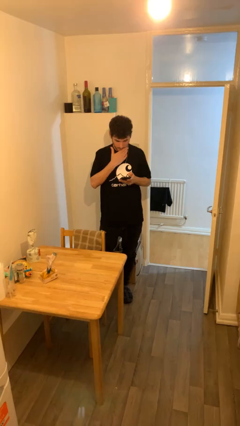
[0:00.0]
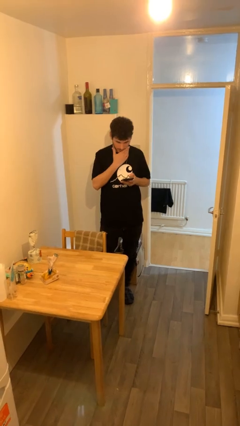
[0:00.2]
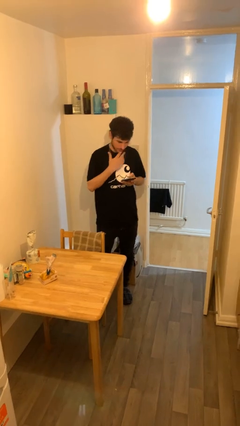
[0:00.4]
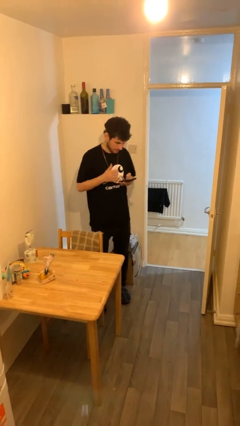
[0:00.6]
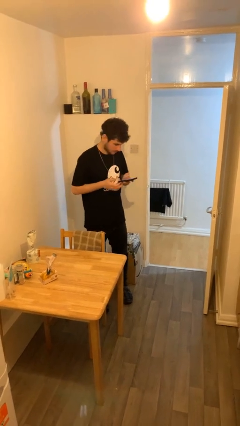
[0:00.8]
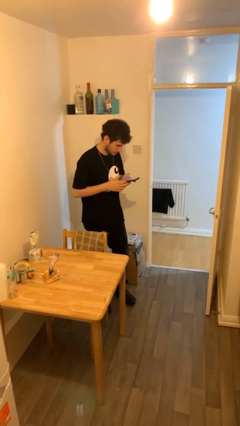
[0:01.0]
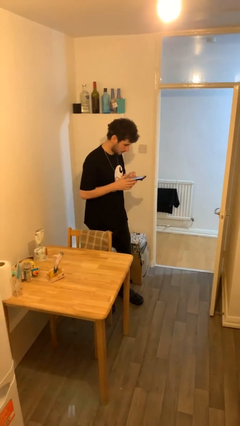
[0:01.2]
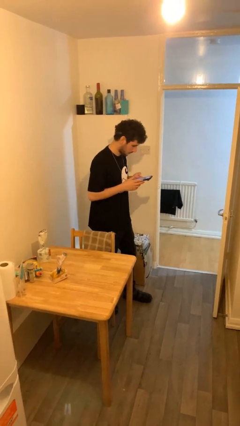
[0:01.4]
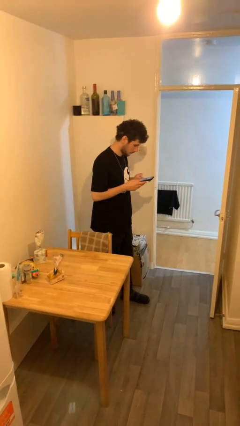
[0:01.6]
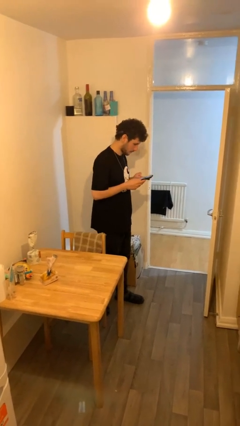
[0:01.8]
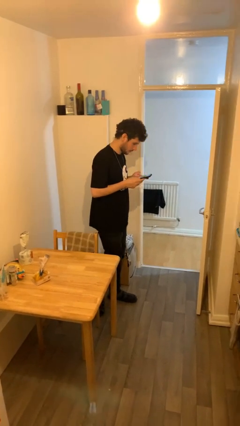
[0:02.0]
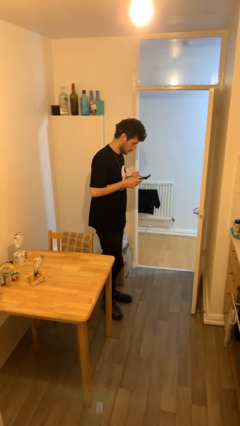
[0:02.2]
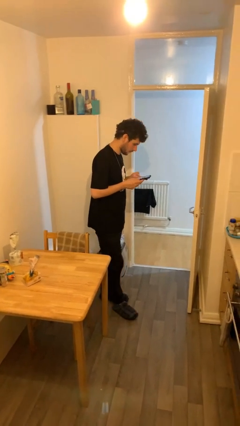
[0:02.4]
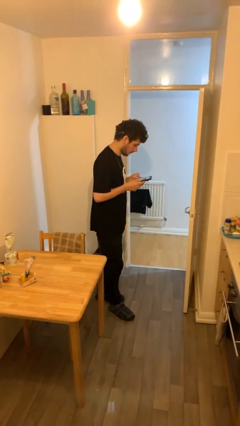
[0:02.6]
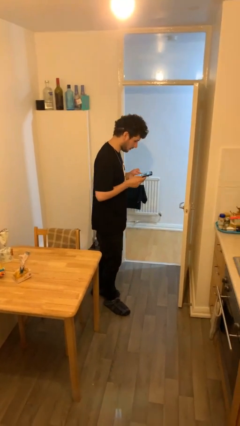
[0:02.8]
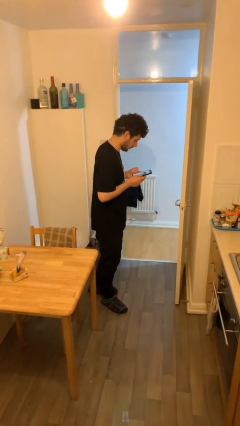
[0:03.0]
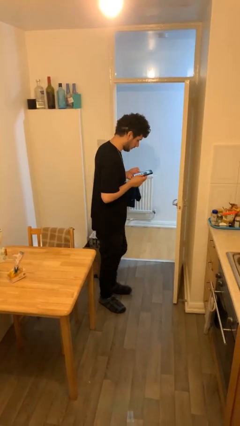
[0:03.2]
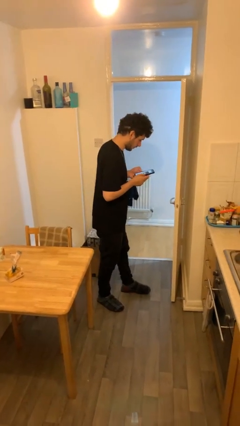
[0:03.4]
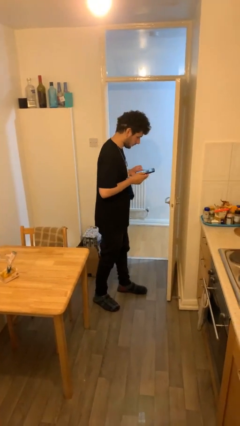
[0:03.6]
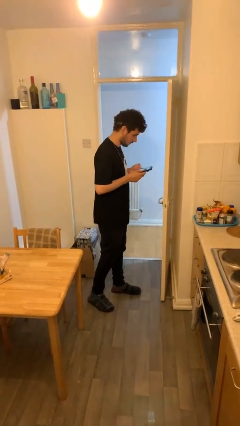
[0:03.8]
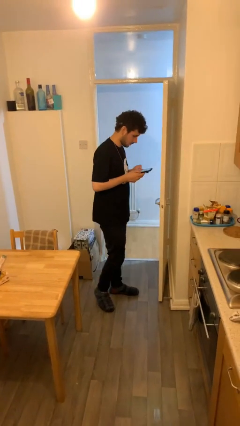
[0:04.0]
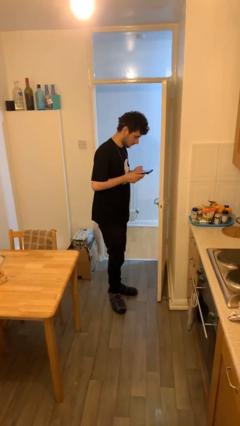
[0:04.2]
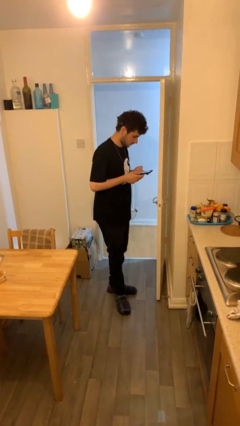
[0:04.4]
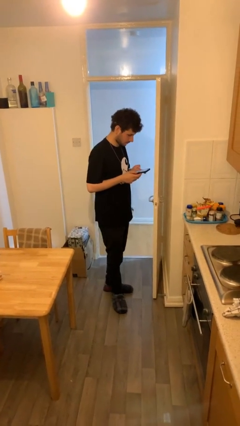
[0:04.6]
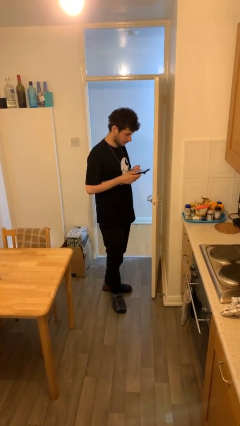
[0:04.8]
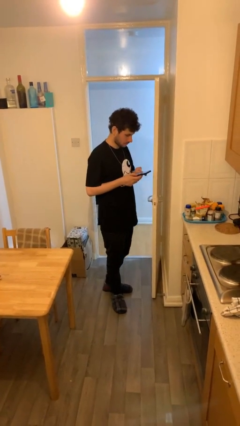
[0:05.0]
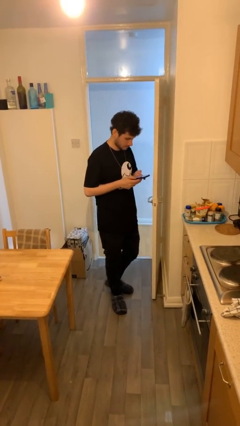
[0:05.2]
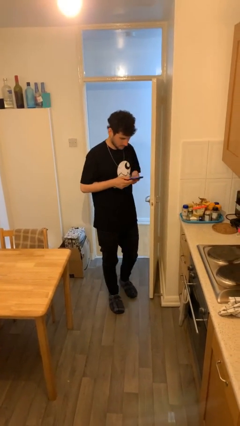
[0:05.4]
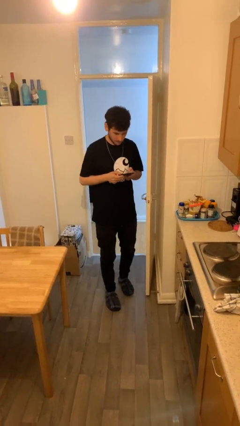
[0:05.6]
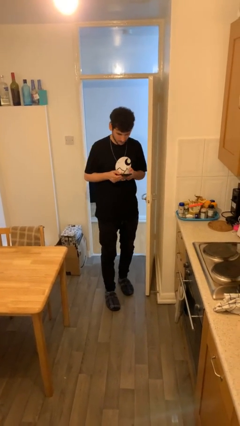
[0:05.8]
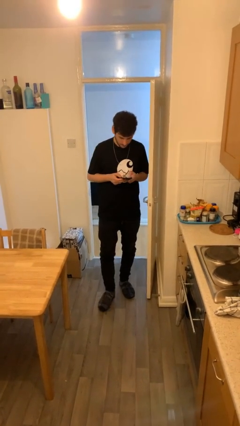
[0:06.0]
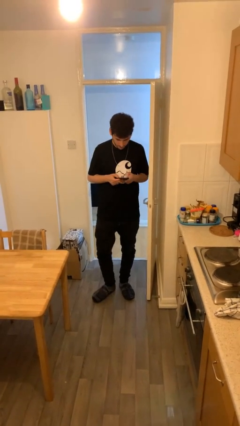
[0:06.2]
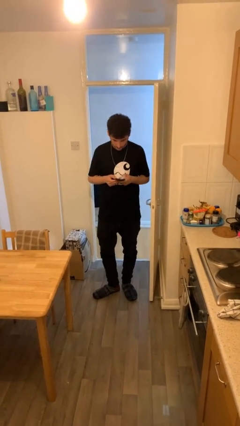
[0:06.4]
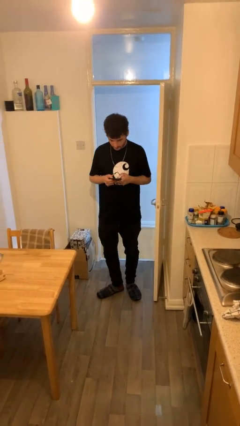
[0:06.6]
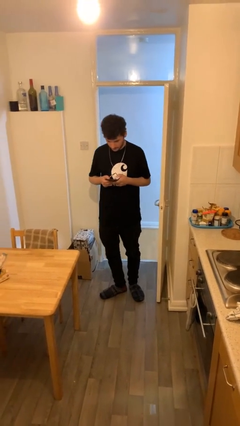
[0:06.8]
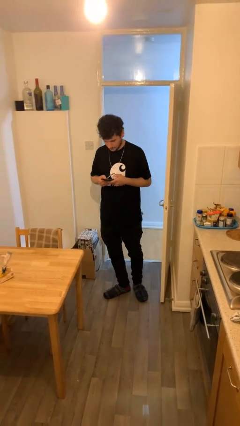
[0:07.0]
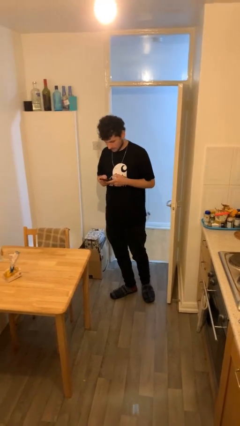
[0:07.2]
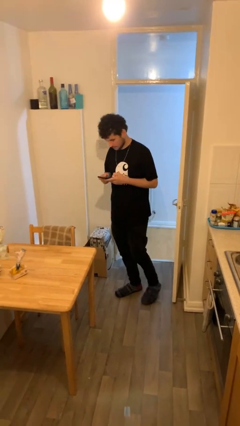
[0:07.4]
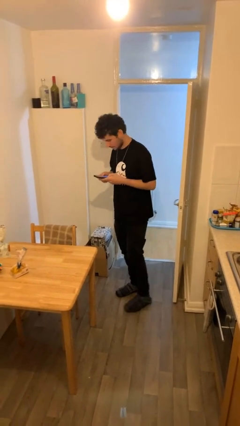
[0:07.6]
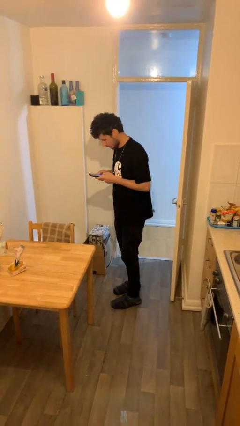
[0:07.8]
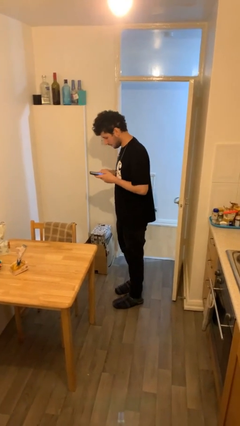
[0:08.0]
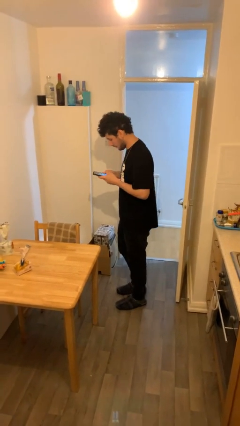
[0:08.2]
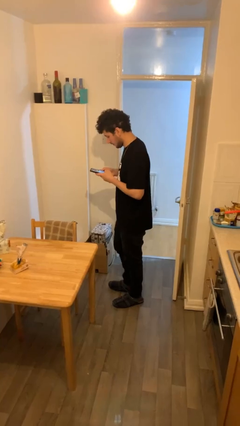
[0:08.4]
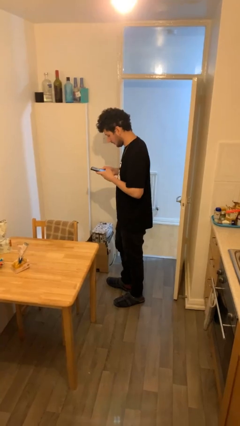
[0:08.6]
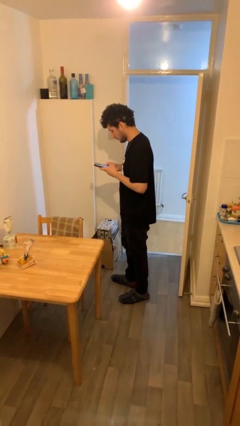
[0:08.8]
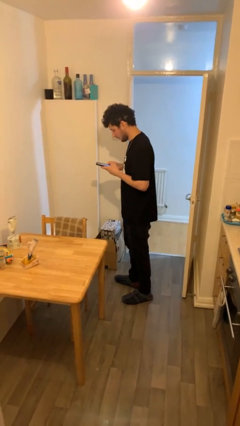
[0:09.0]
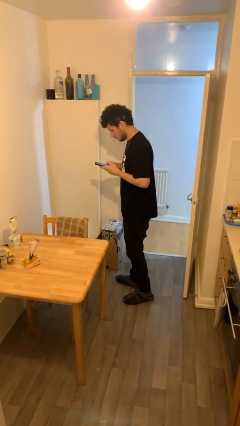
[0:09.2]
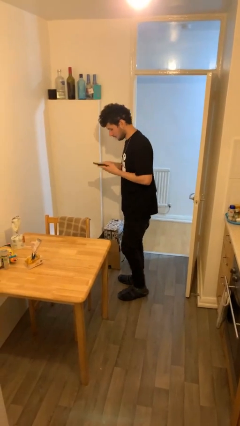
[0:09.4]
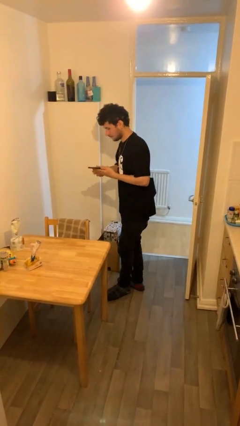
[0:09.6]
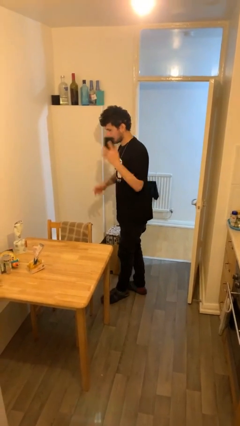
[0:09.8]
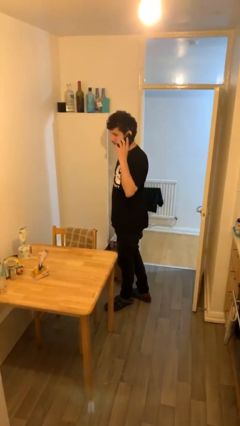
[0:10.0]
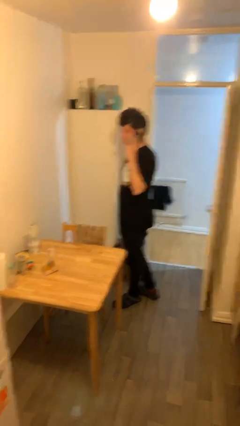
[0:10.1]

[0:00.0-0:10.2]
person texts on phone

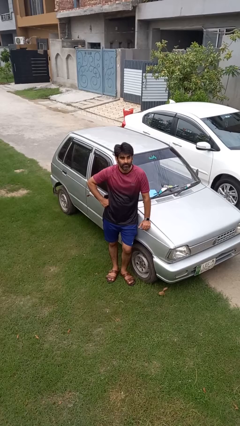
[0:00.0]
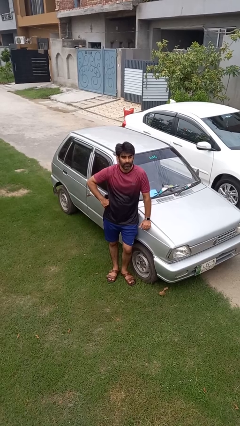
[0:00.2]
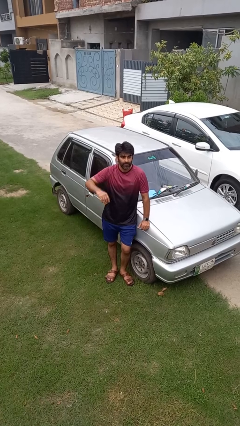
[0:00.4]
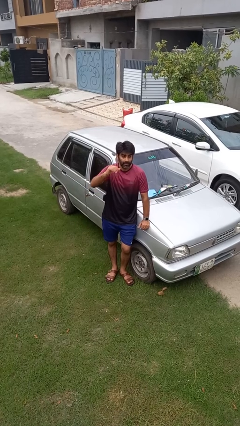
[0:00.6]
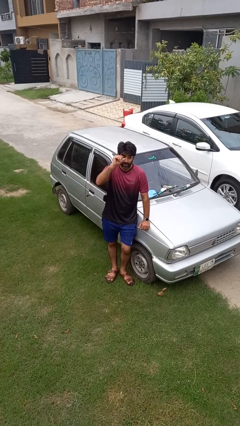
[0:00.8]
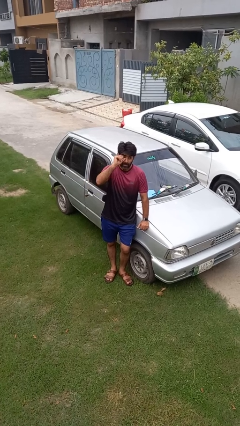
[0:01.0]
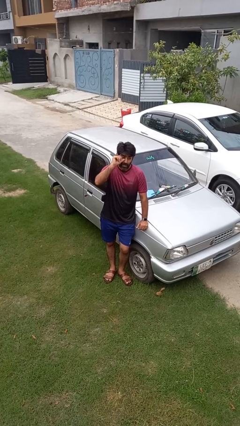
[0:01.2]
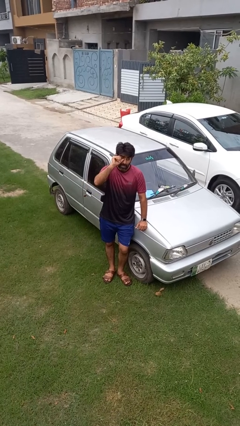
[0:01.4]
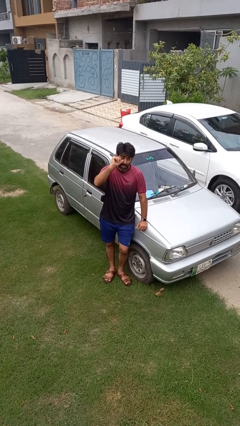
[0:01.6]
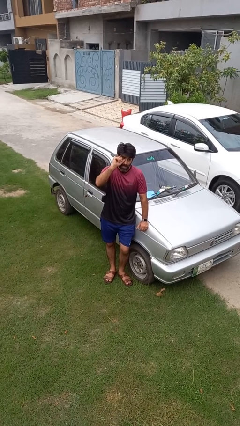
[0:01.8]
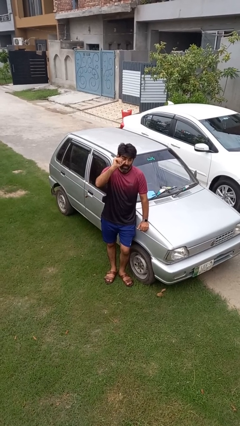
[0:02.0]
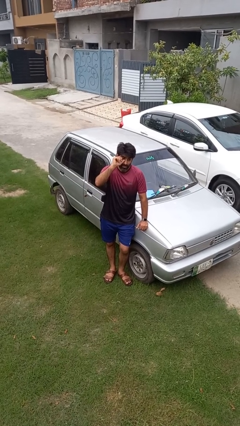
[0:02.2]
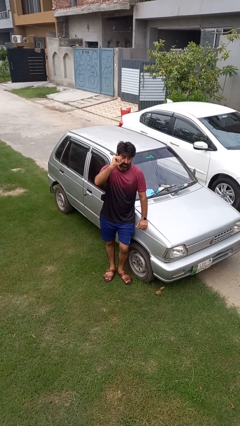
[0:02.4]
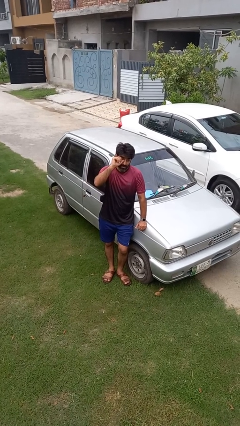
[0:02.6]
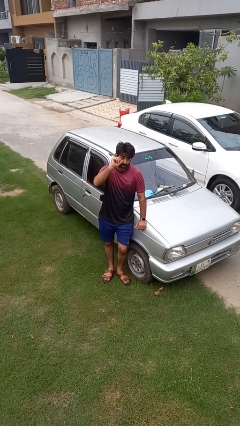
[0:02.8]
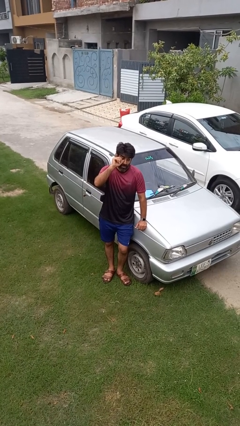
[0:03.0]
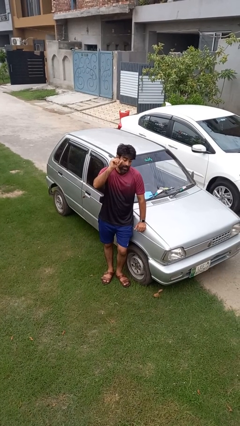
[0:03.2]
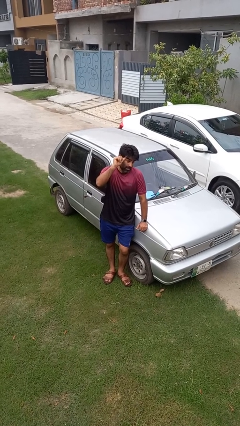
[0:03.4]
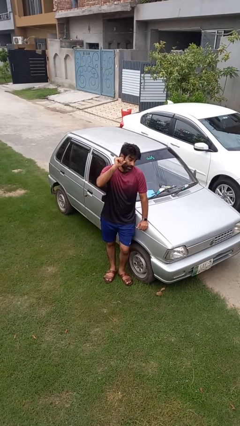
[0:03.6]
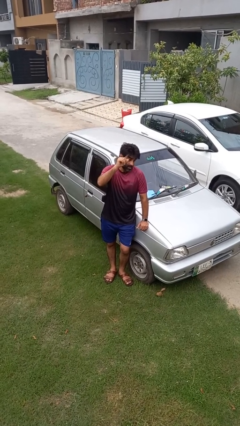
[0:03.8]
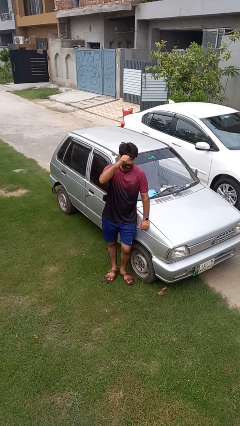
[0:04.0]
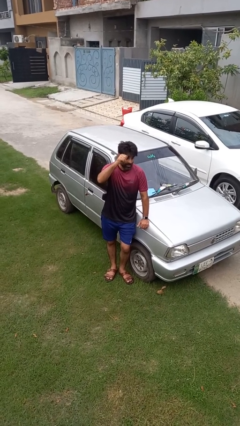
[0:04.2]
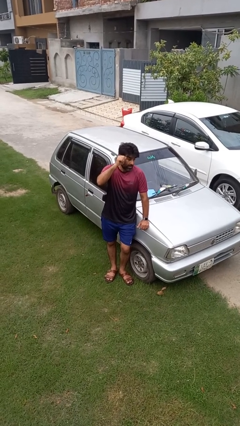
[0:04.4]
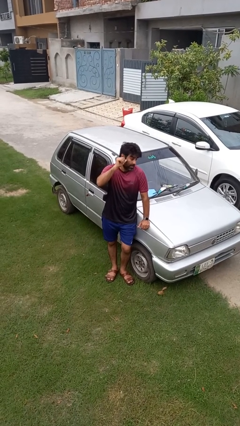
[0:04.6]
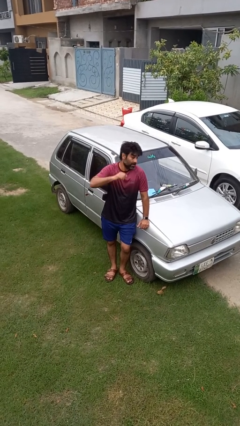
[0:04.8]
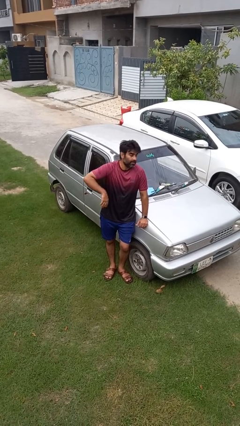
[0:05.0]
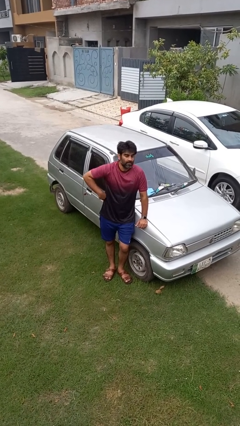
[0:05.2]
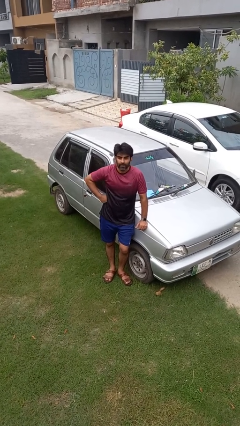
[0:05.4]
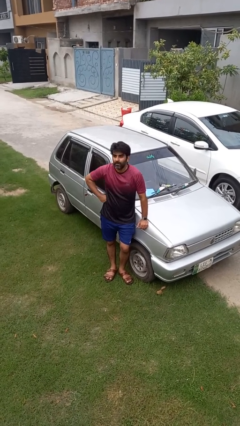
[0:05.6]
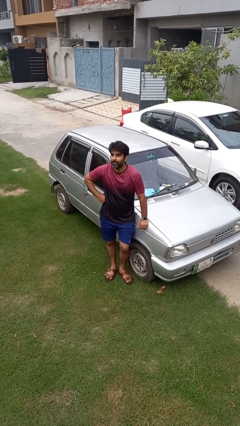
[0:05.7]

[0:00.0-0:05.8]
person scratches face

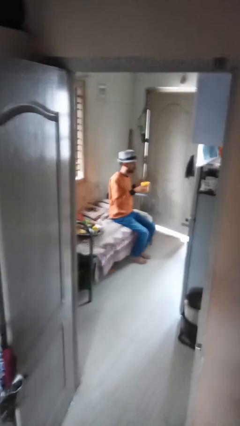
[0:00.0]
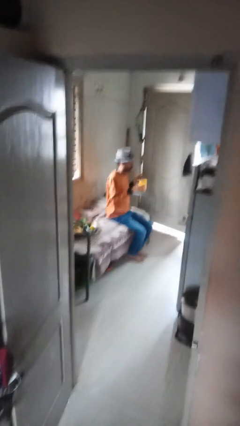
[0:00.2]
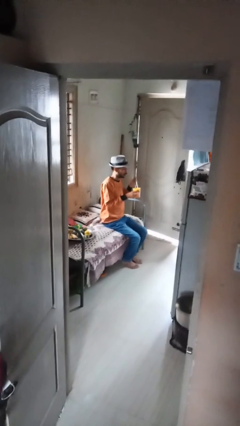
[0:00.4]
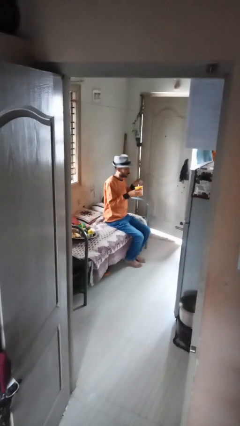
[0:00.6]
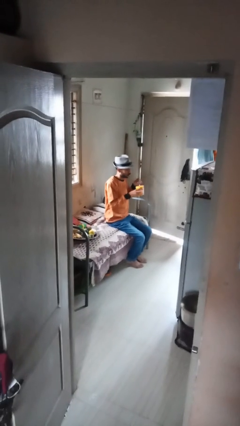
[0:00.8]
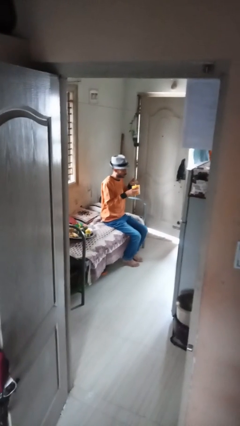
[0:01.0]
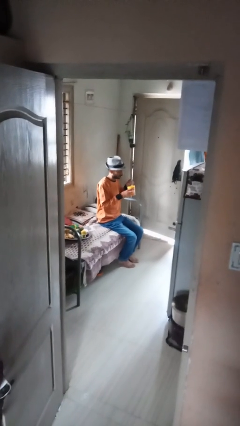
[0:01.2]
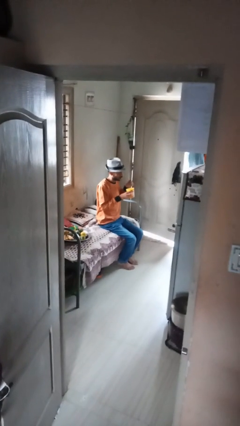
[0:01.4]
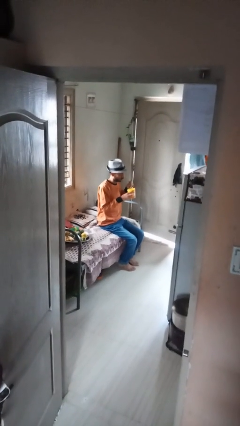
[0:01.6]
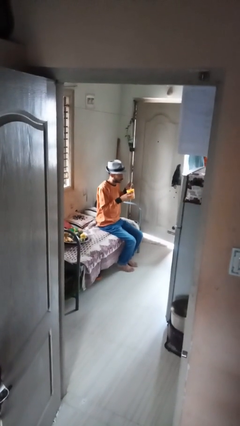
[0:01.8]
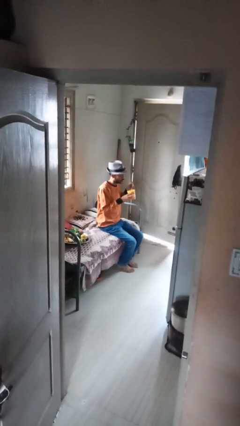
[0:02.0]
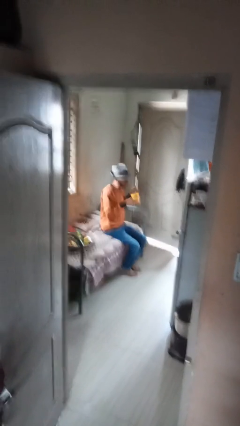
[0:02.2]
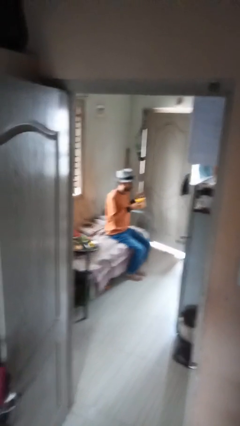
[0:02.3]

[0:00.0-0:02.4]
person stirs mug
